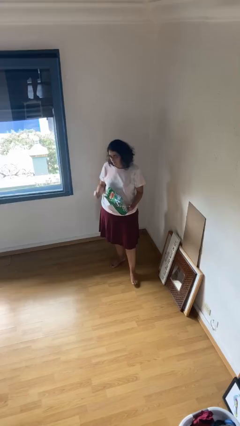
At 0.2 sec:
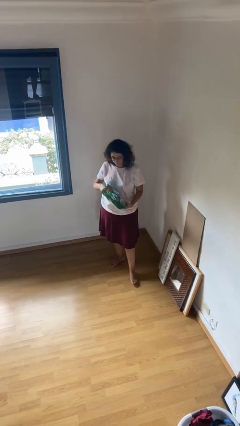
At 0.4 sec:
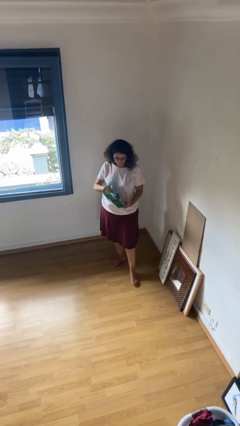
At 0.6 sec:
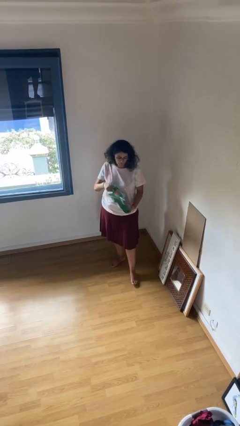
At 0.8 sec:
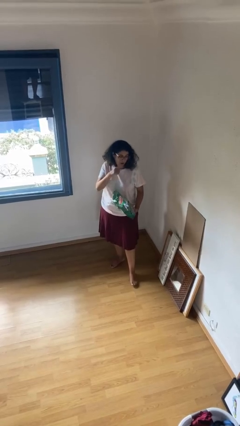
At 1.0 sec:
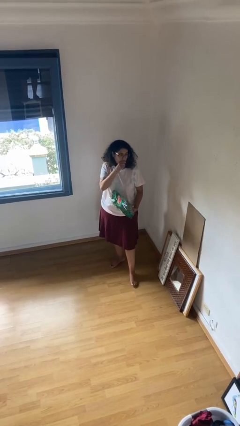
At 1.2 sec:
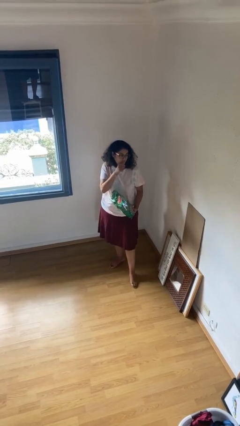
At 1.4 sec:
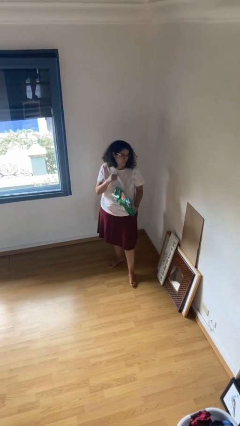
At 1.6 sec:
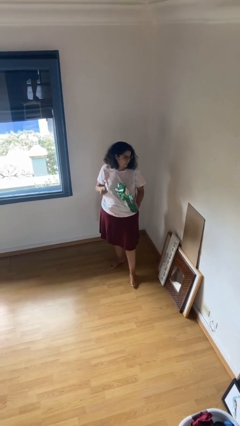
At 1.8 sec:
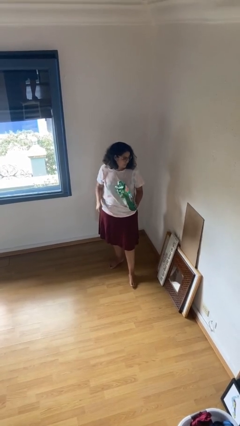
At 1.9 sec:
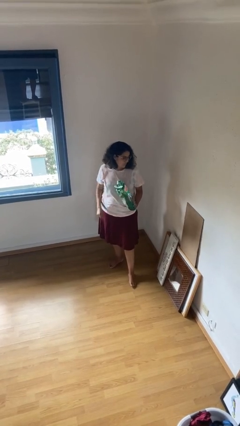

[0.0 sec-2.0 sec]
person eats snack from bag

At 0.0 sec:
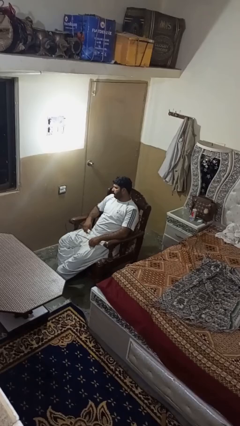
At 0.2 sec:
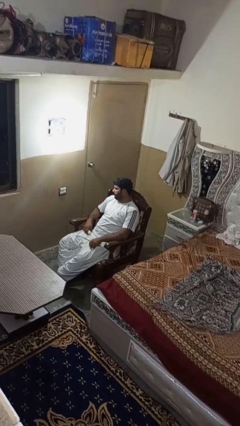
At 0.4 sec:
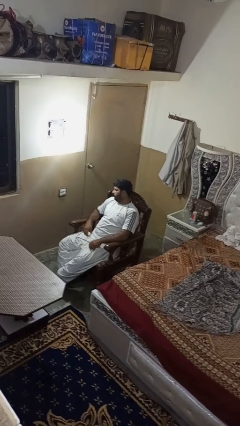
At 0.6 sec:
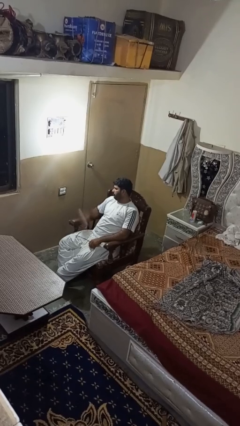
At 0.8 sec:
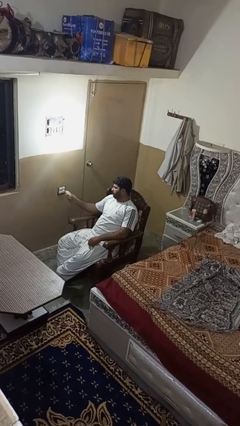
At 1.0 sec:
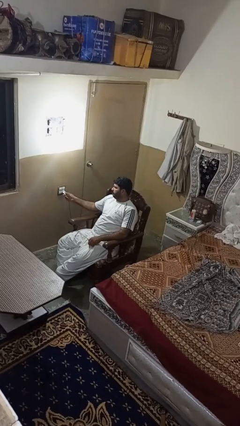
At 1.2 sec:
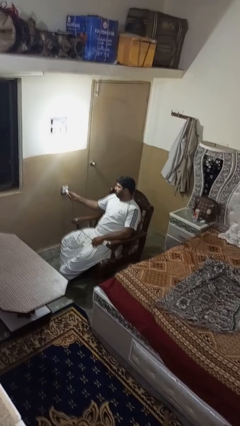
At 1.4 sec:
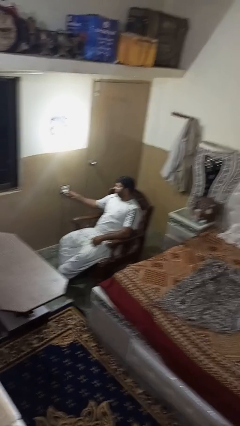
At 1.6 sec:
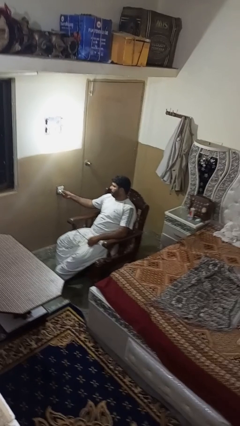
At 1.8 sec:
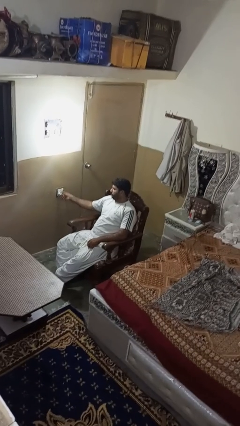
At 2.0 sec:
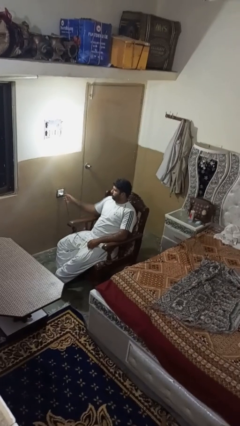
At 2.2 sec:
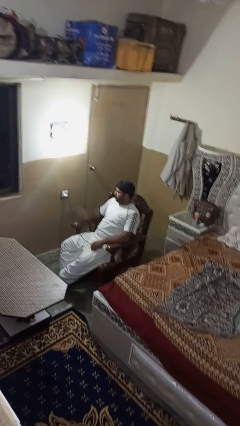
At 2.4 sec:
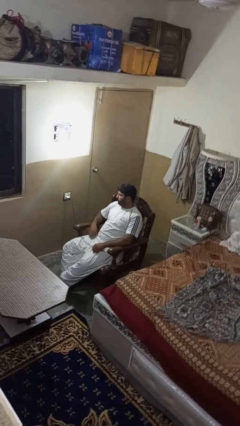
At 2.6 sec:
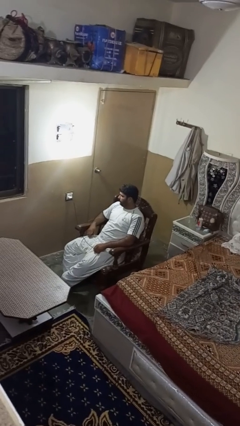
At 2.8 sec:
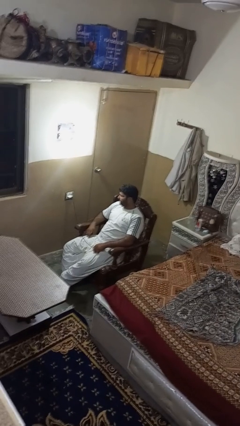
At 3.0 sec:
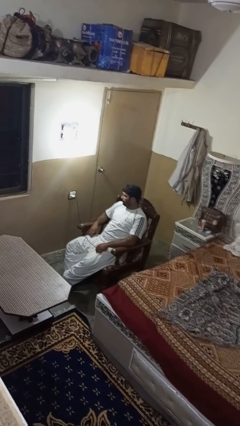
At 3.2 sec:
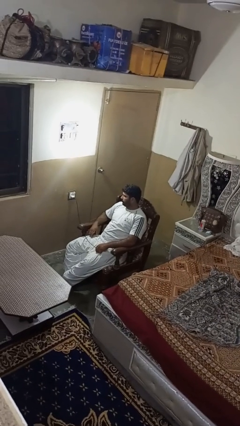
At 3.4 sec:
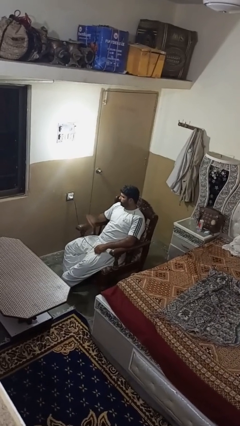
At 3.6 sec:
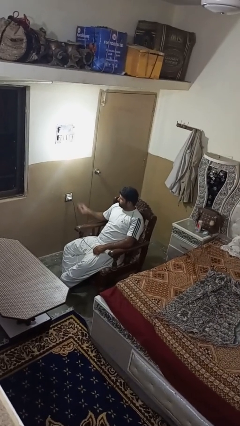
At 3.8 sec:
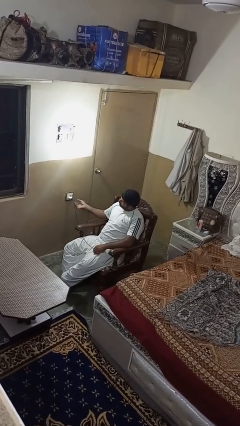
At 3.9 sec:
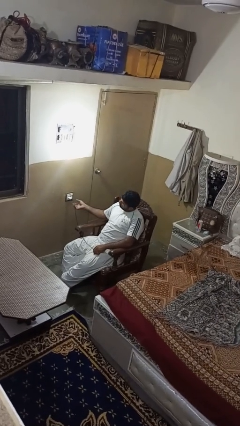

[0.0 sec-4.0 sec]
person plugs into electrical socket

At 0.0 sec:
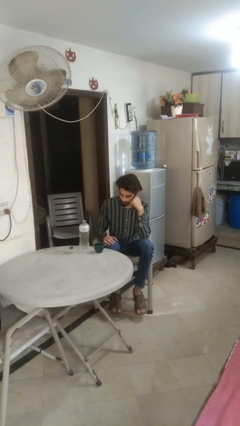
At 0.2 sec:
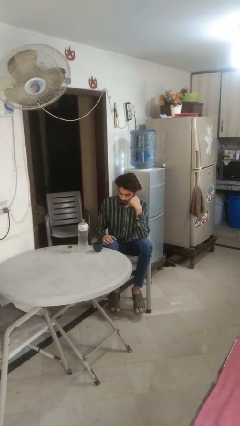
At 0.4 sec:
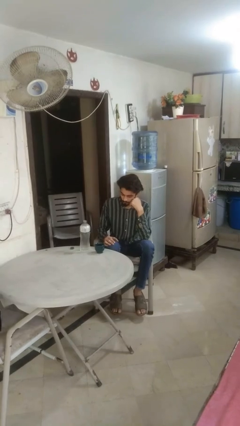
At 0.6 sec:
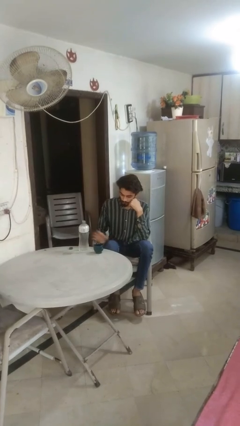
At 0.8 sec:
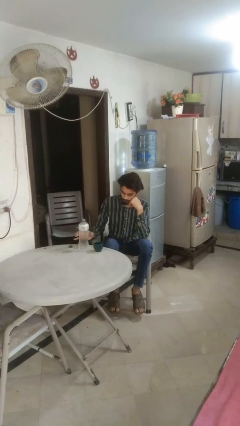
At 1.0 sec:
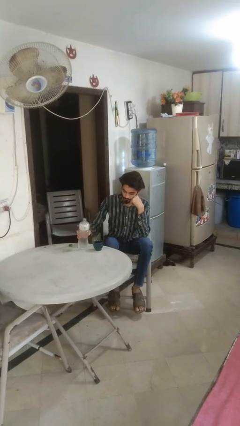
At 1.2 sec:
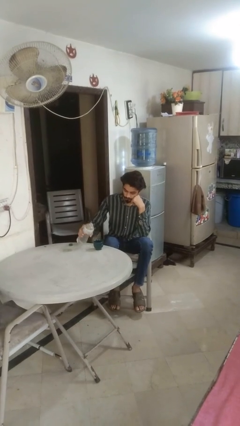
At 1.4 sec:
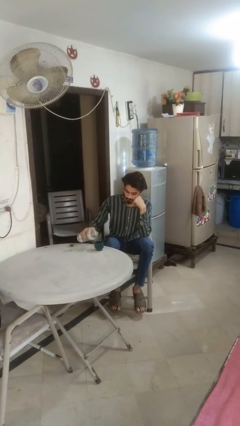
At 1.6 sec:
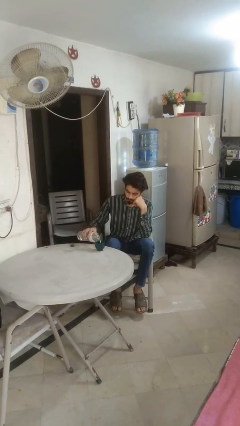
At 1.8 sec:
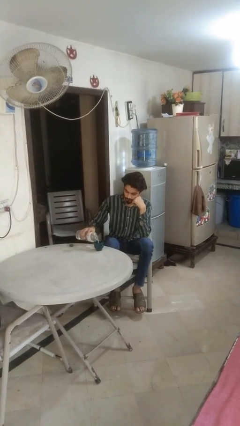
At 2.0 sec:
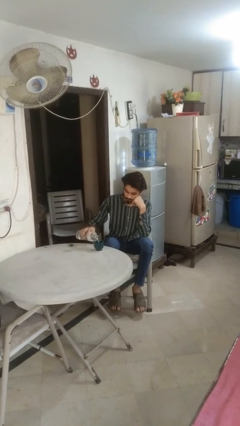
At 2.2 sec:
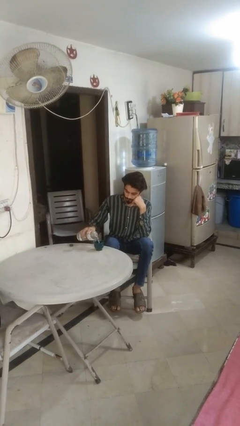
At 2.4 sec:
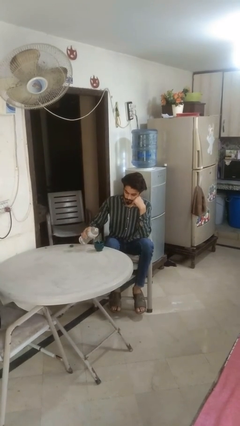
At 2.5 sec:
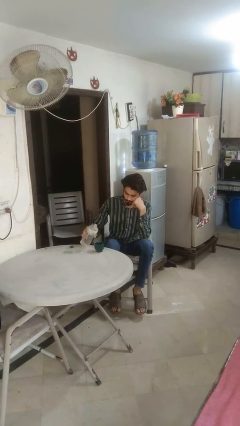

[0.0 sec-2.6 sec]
person pours liquid into cup

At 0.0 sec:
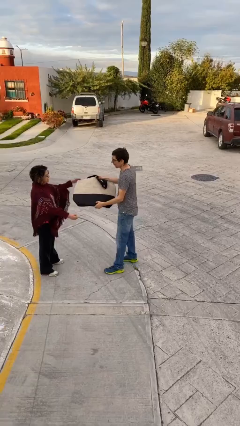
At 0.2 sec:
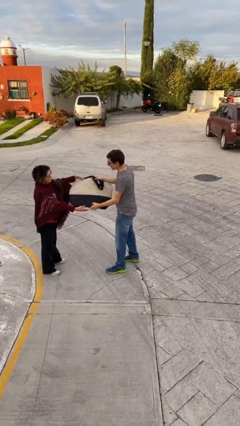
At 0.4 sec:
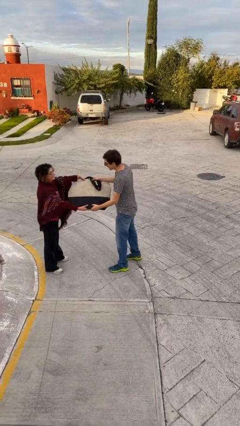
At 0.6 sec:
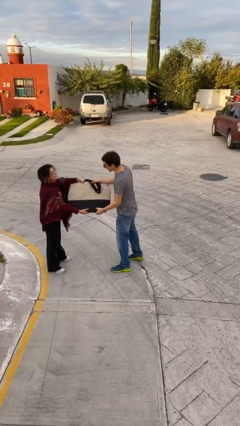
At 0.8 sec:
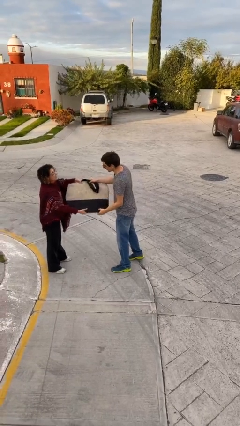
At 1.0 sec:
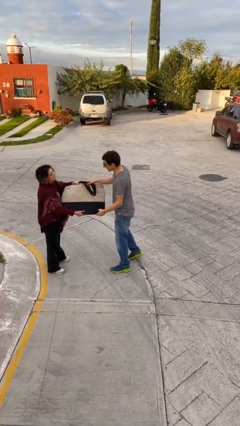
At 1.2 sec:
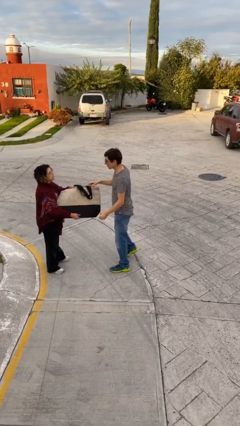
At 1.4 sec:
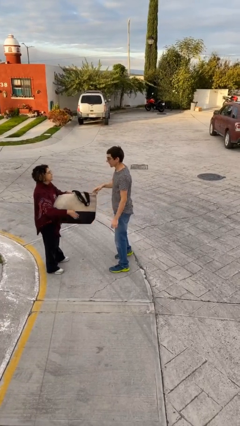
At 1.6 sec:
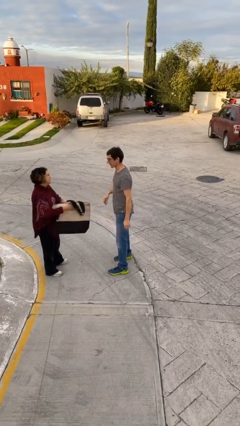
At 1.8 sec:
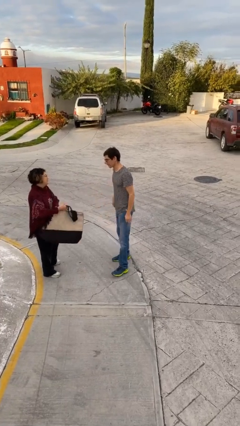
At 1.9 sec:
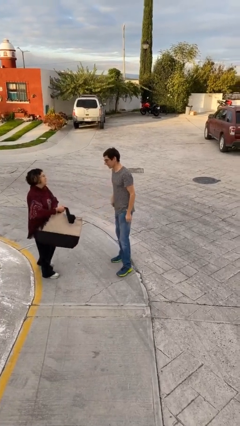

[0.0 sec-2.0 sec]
person transfers object to person

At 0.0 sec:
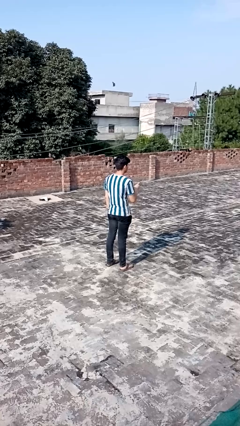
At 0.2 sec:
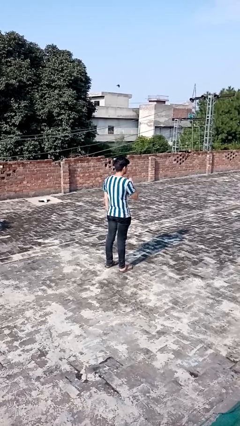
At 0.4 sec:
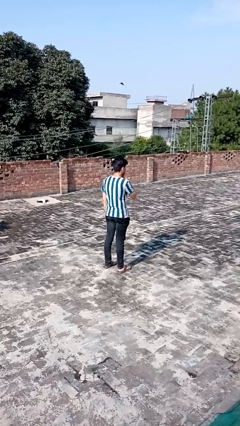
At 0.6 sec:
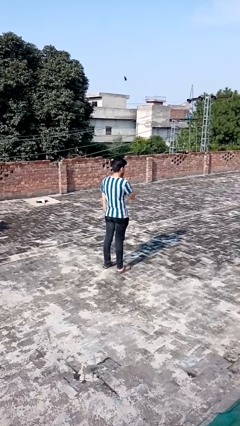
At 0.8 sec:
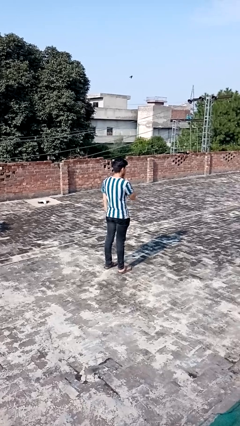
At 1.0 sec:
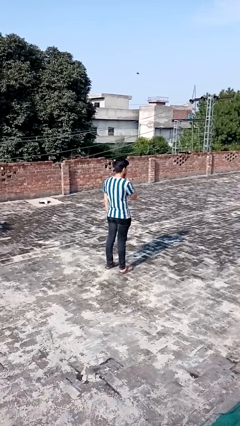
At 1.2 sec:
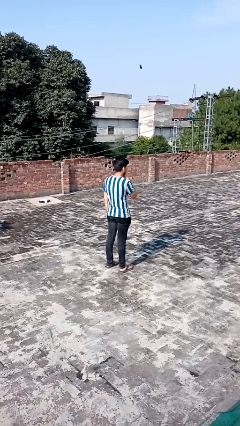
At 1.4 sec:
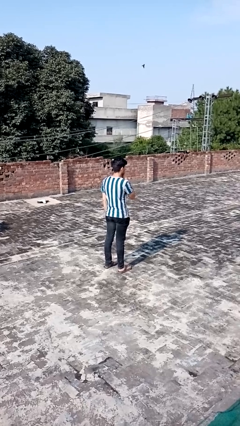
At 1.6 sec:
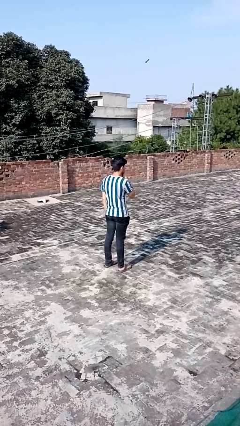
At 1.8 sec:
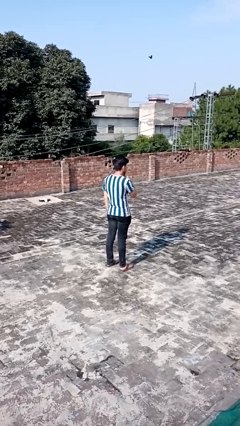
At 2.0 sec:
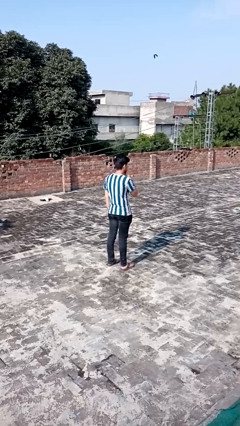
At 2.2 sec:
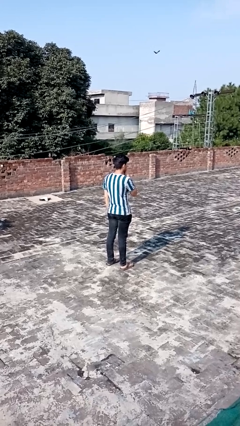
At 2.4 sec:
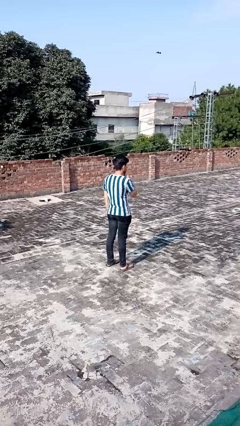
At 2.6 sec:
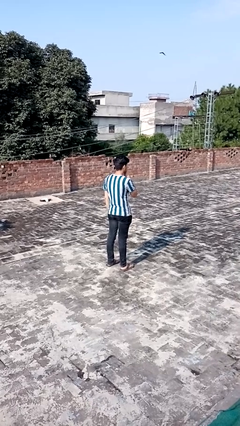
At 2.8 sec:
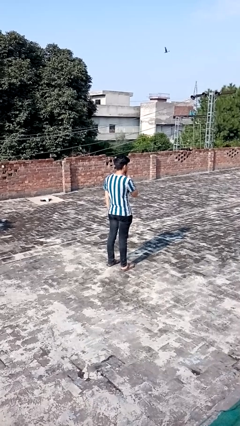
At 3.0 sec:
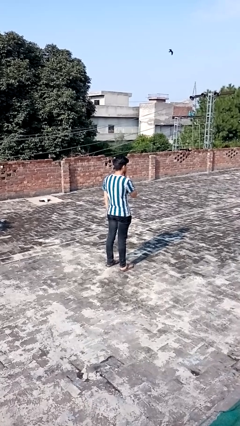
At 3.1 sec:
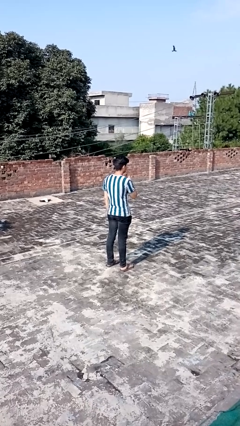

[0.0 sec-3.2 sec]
person gestures be quiet

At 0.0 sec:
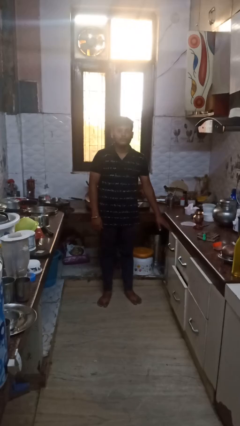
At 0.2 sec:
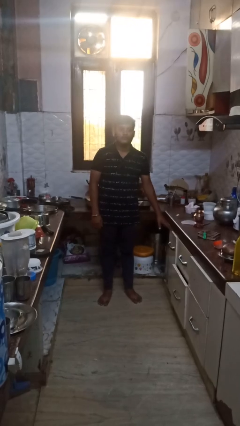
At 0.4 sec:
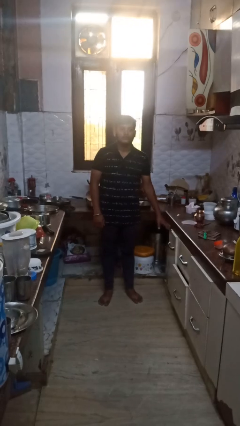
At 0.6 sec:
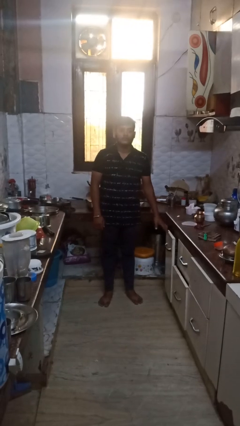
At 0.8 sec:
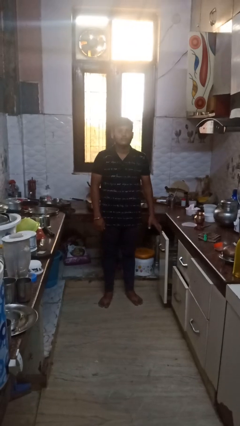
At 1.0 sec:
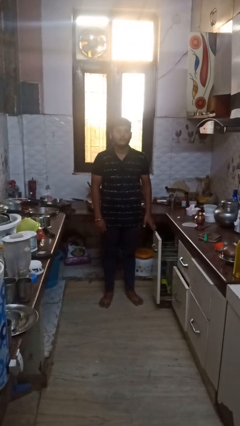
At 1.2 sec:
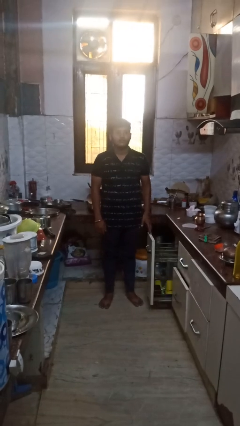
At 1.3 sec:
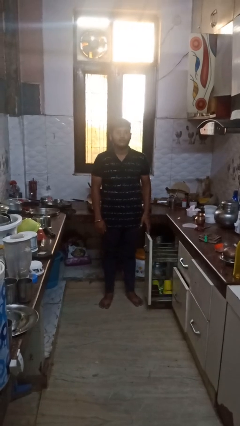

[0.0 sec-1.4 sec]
person opens dishwasher

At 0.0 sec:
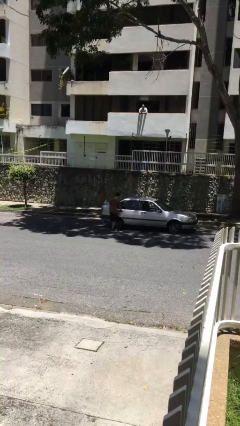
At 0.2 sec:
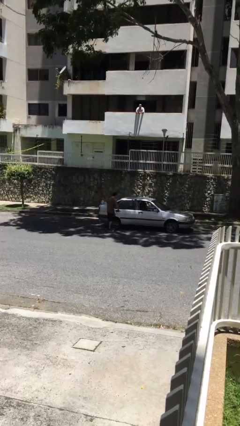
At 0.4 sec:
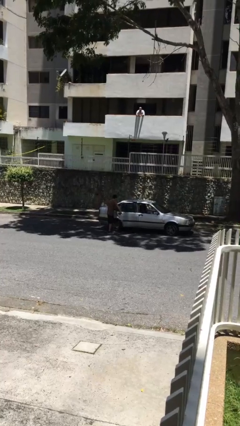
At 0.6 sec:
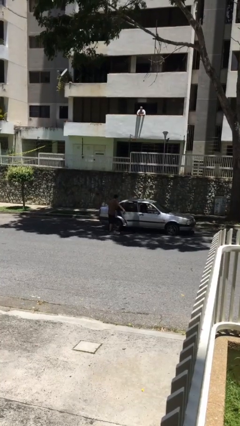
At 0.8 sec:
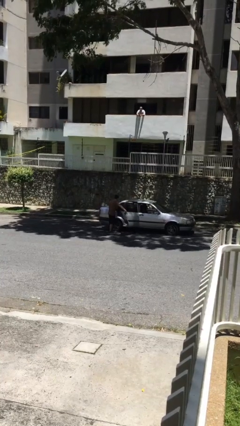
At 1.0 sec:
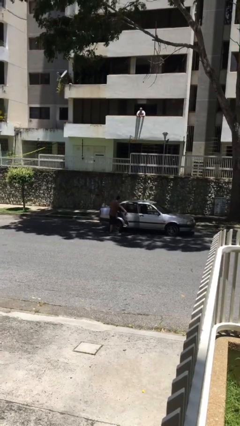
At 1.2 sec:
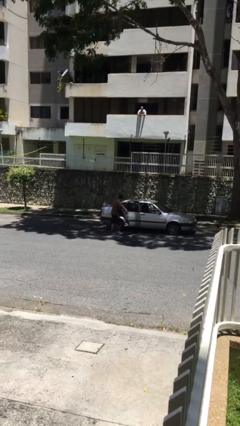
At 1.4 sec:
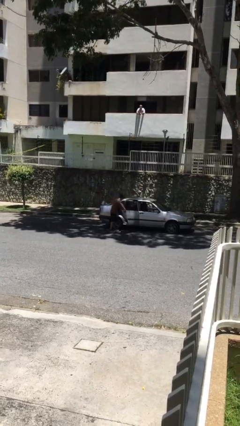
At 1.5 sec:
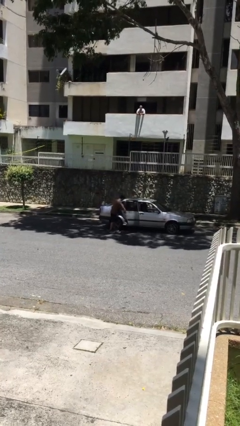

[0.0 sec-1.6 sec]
person opens car door
